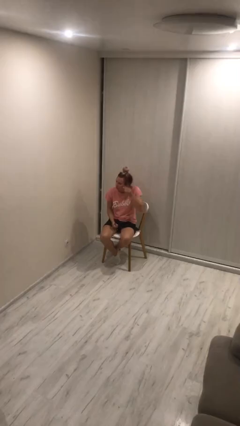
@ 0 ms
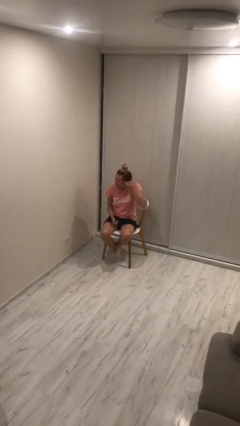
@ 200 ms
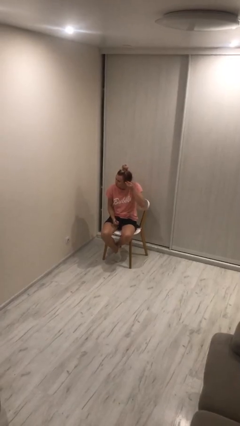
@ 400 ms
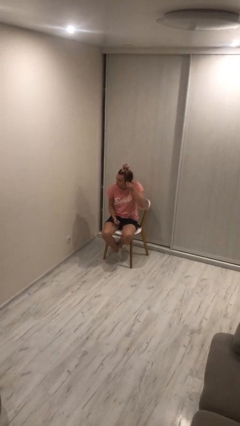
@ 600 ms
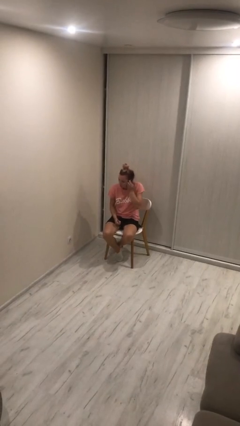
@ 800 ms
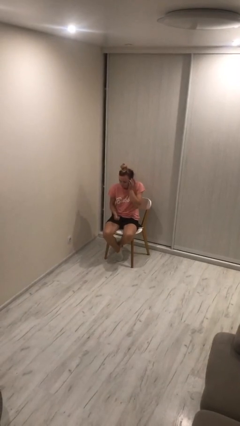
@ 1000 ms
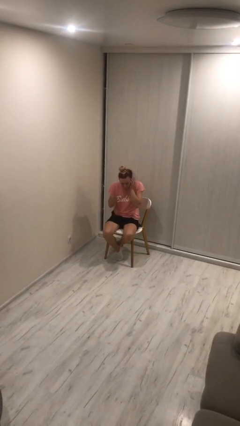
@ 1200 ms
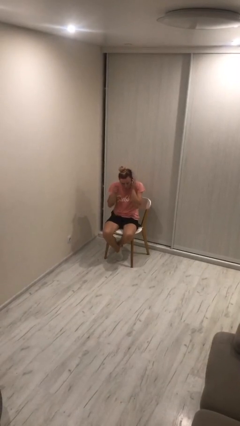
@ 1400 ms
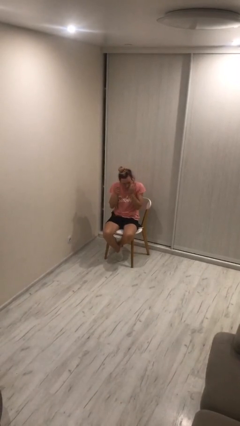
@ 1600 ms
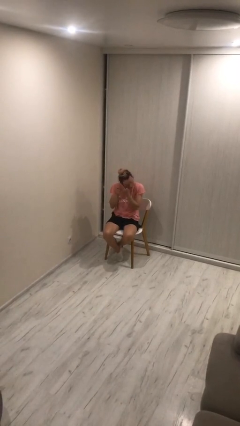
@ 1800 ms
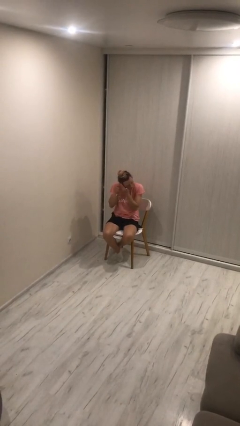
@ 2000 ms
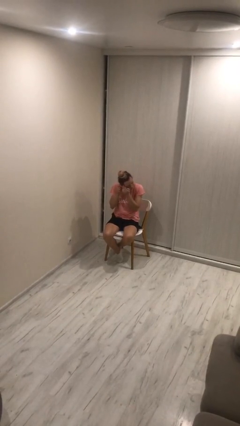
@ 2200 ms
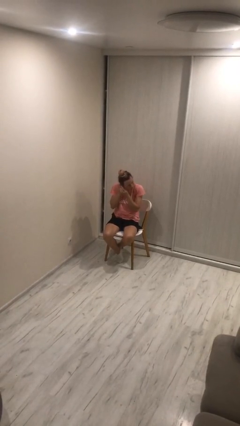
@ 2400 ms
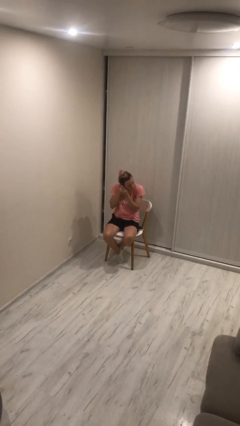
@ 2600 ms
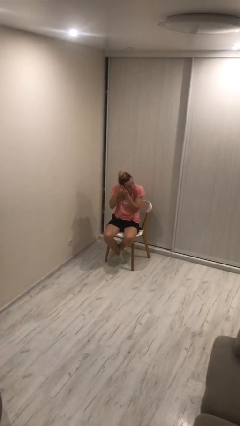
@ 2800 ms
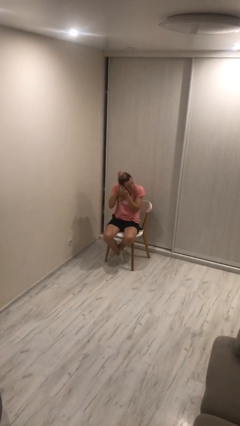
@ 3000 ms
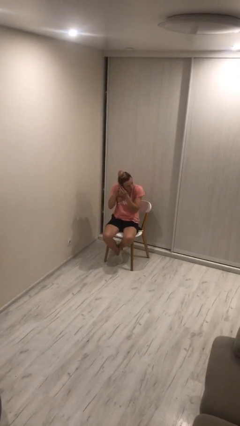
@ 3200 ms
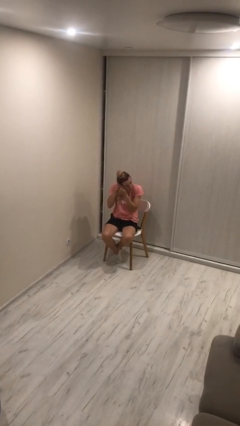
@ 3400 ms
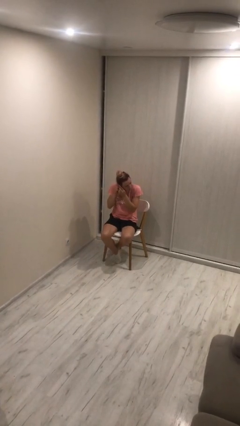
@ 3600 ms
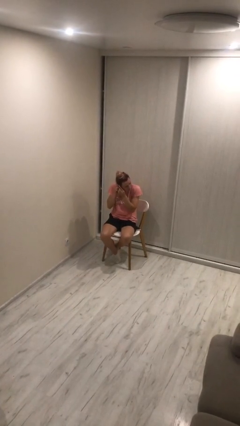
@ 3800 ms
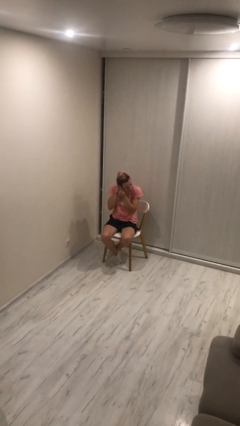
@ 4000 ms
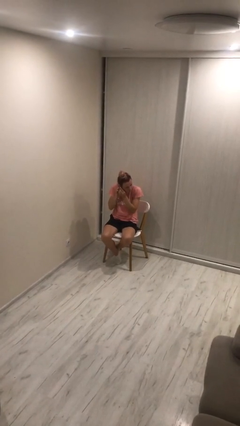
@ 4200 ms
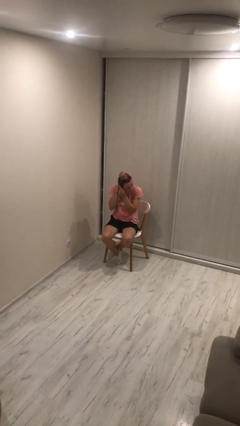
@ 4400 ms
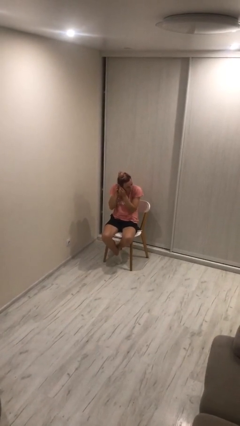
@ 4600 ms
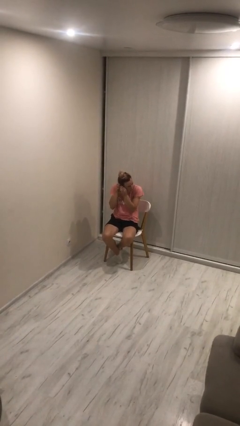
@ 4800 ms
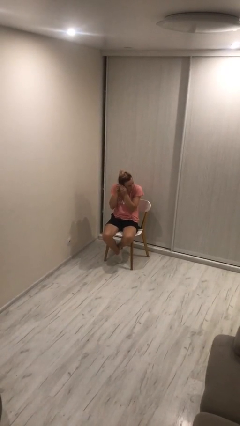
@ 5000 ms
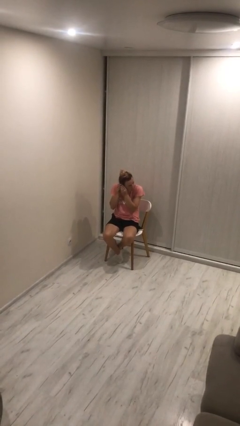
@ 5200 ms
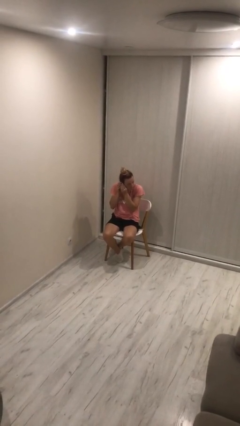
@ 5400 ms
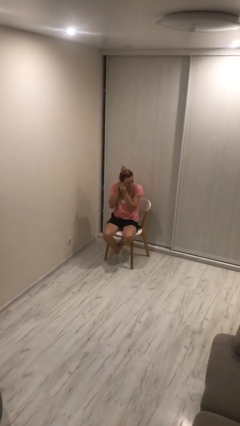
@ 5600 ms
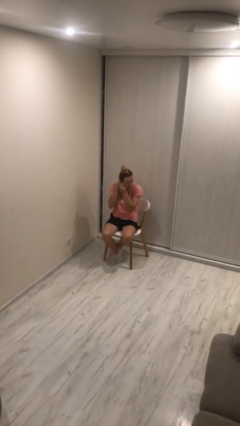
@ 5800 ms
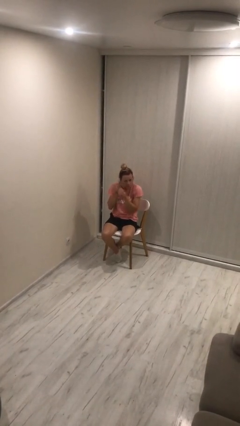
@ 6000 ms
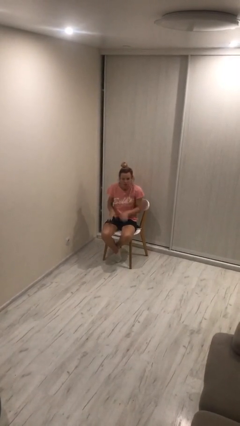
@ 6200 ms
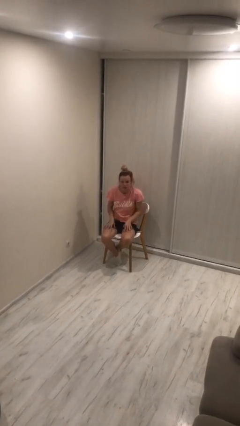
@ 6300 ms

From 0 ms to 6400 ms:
person puts on earrings

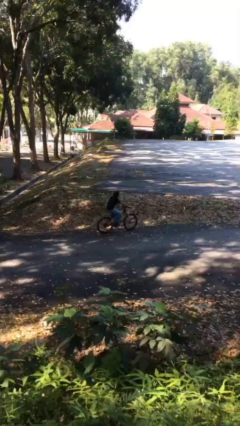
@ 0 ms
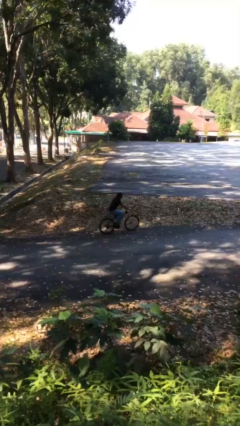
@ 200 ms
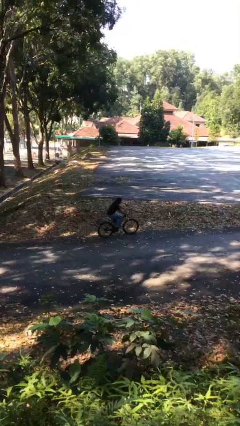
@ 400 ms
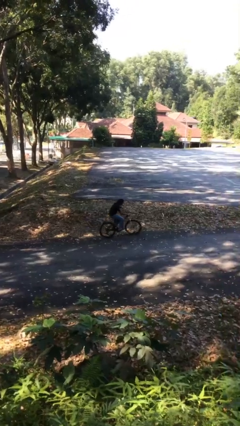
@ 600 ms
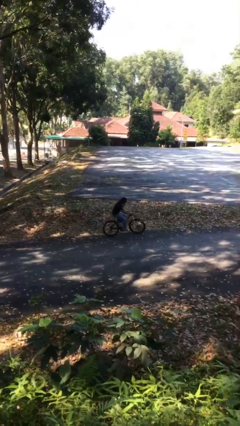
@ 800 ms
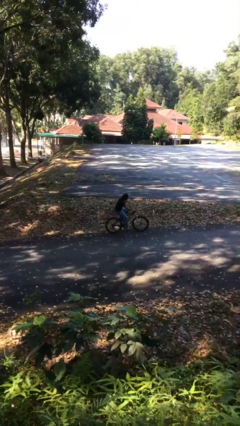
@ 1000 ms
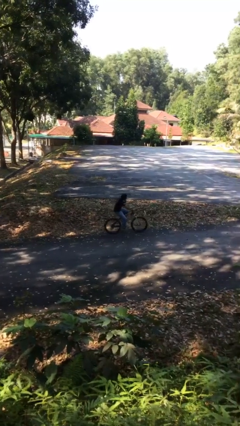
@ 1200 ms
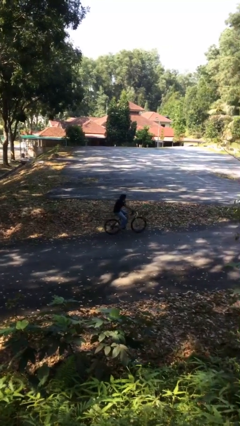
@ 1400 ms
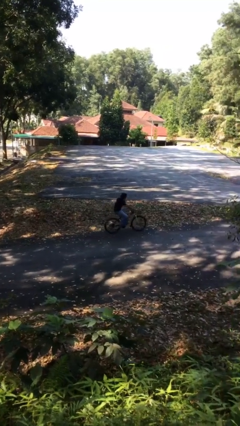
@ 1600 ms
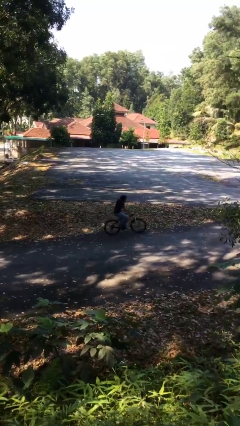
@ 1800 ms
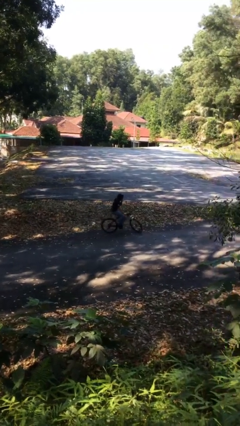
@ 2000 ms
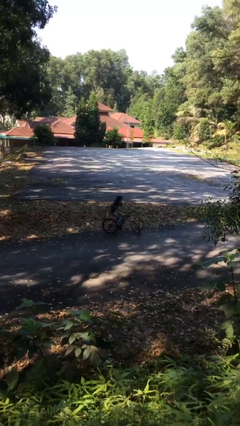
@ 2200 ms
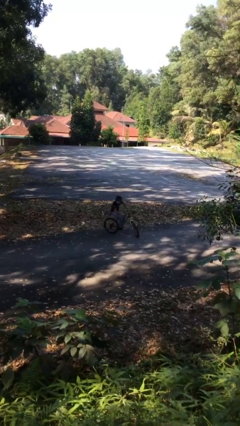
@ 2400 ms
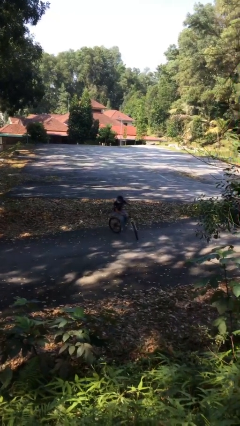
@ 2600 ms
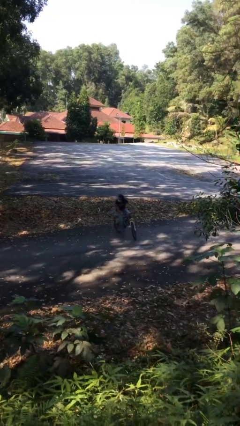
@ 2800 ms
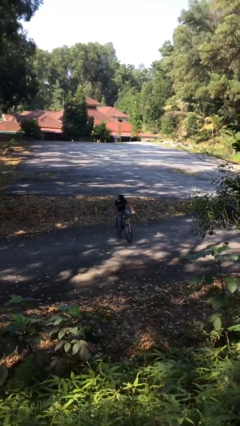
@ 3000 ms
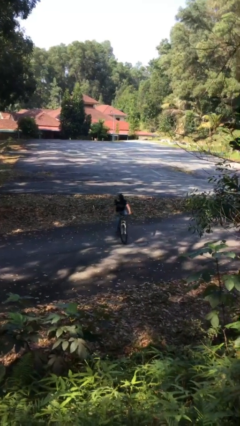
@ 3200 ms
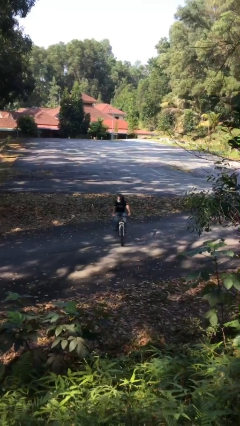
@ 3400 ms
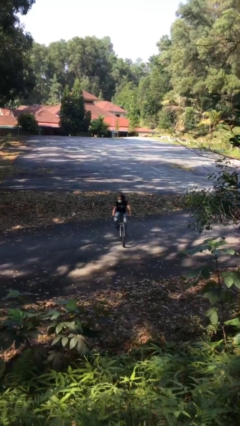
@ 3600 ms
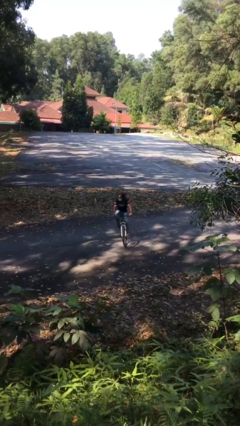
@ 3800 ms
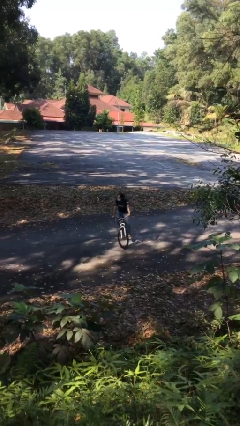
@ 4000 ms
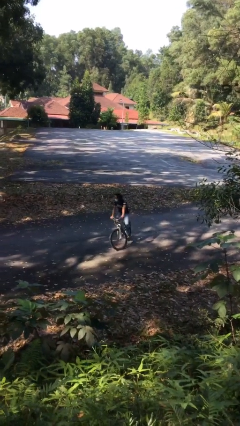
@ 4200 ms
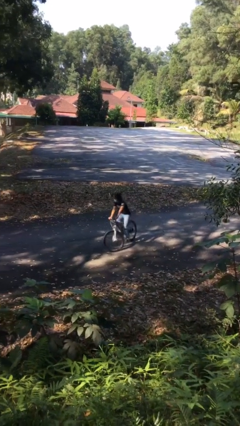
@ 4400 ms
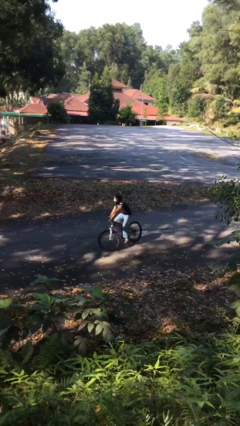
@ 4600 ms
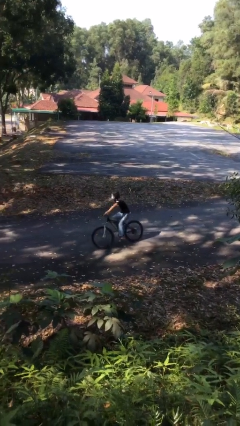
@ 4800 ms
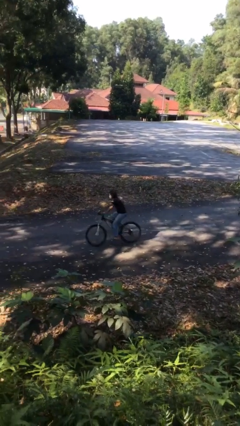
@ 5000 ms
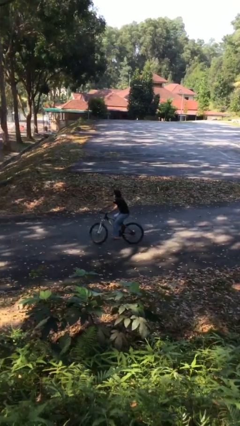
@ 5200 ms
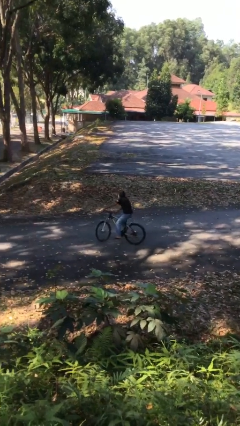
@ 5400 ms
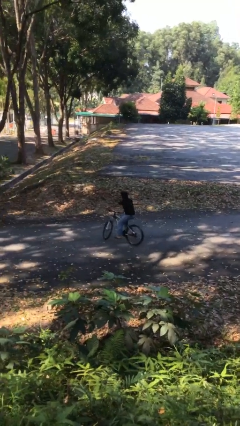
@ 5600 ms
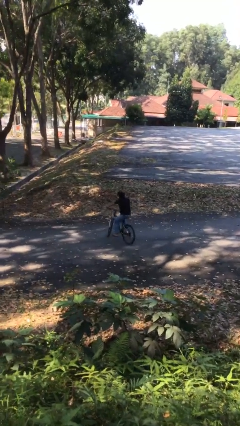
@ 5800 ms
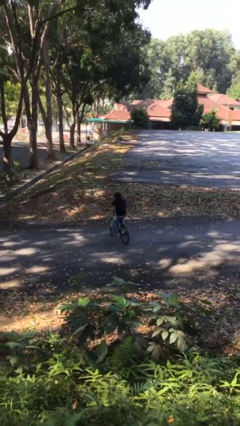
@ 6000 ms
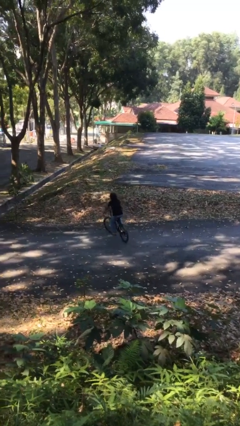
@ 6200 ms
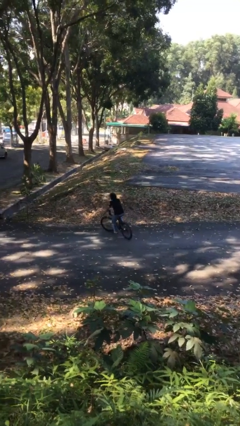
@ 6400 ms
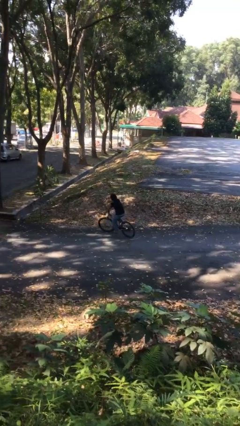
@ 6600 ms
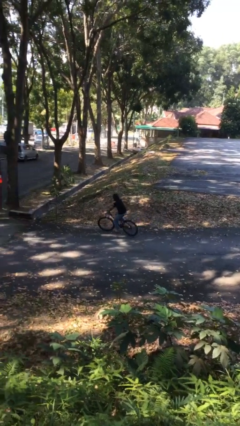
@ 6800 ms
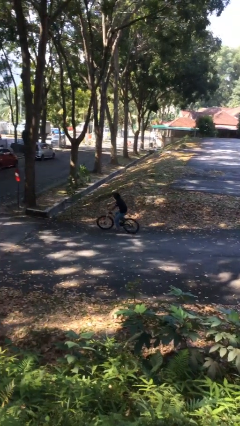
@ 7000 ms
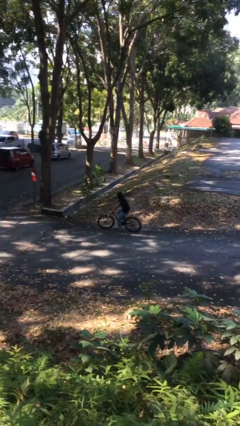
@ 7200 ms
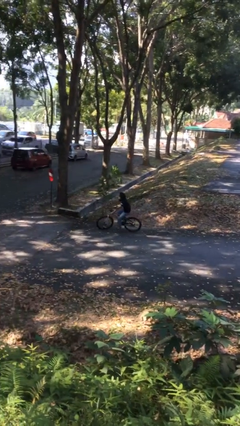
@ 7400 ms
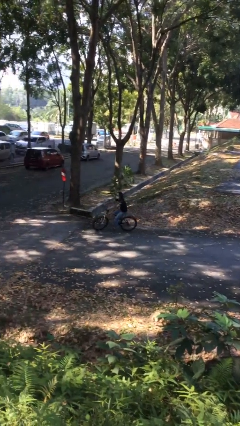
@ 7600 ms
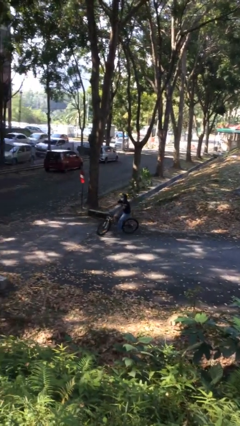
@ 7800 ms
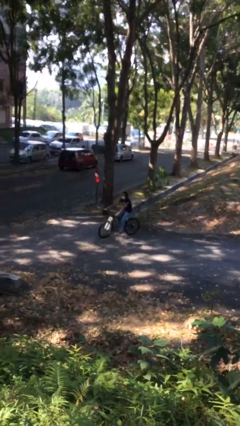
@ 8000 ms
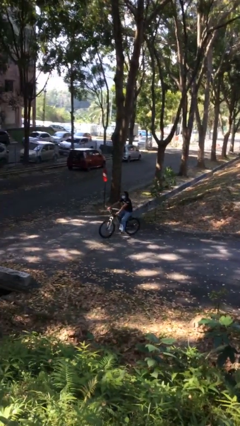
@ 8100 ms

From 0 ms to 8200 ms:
person rides bicycle

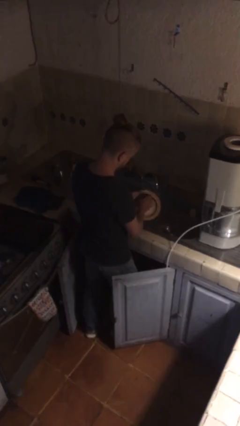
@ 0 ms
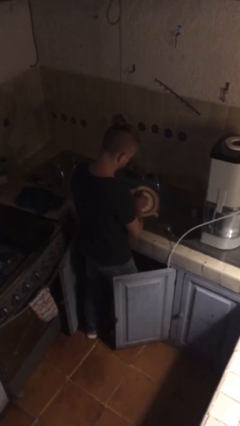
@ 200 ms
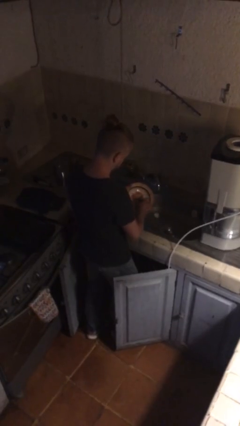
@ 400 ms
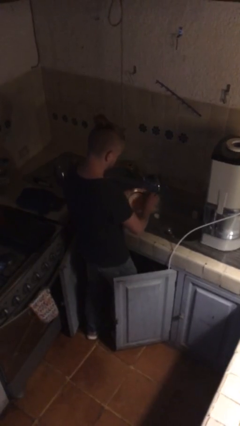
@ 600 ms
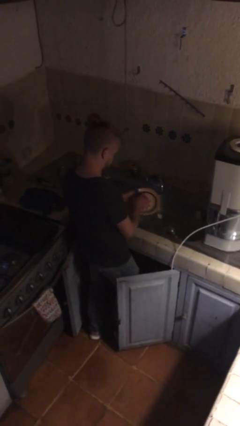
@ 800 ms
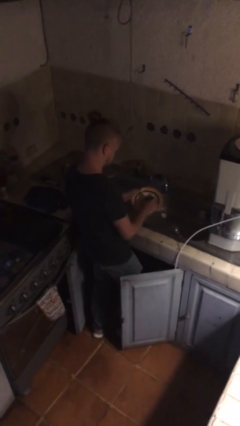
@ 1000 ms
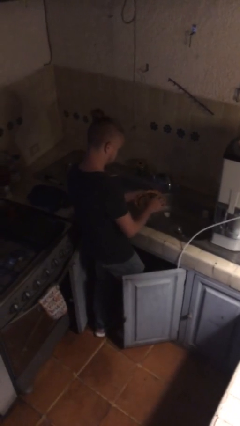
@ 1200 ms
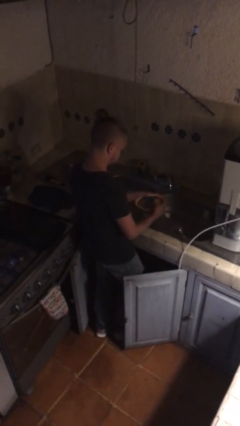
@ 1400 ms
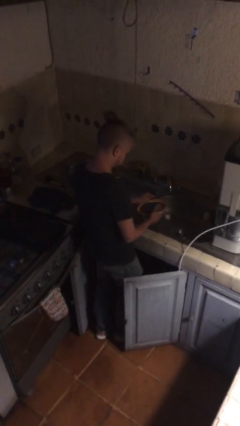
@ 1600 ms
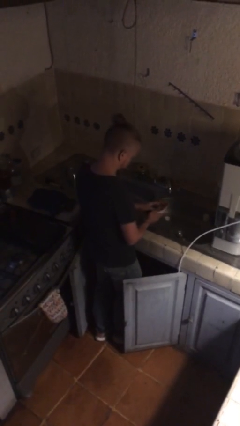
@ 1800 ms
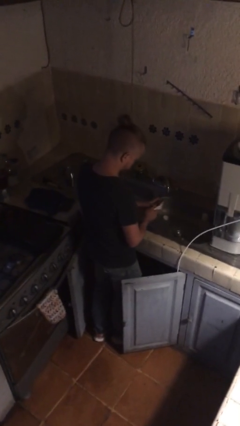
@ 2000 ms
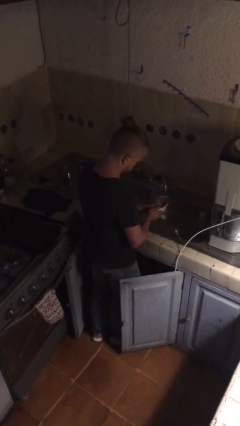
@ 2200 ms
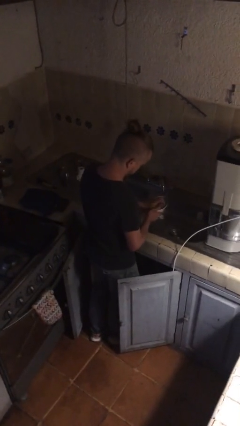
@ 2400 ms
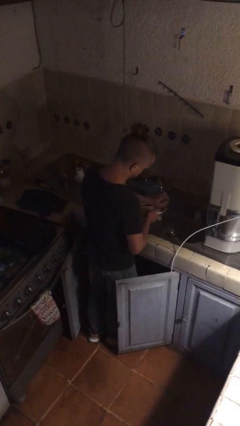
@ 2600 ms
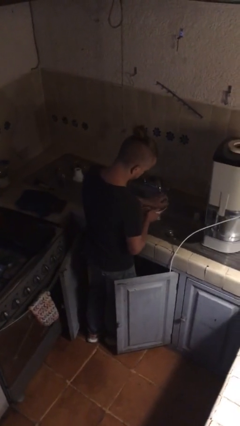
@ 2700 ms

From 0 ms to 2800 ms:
person washes dish

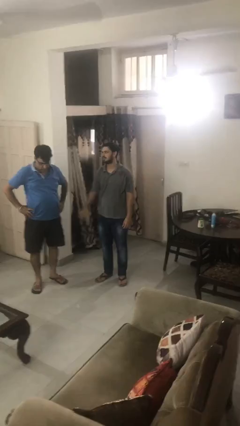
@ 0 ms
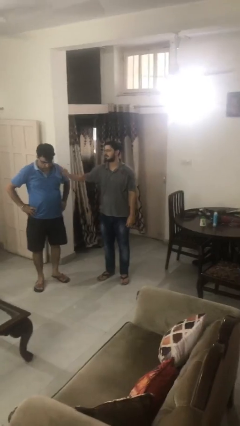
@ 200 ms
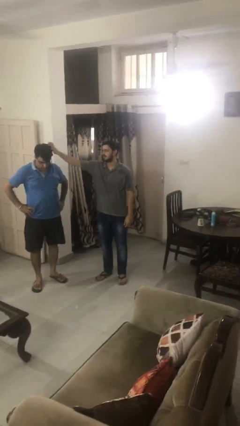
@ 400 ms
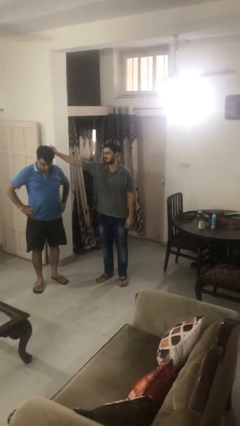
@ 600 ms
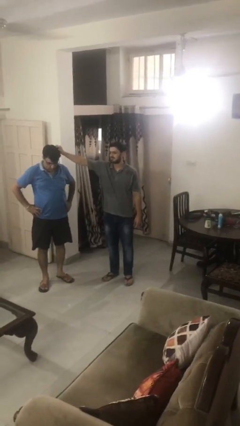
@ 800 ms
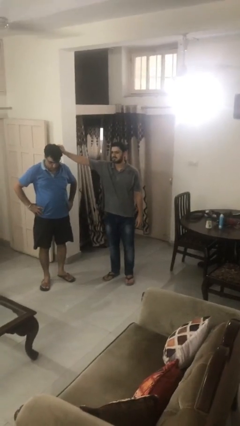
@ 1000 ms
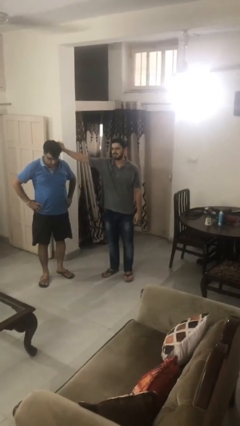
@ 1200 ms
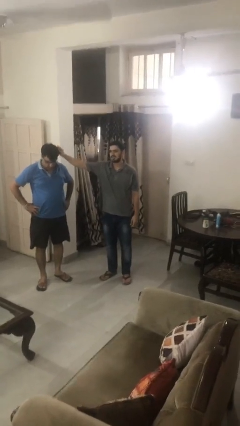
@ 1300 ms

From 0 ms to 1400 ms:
person grabs person by hair